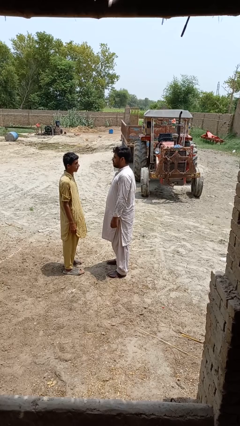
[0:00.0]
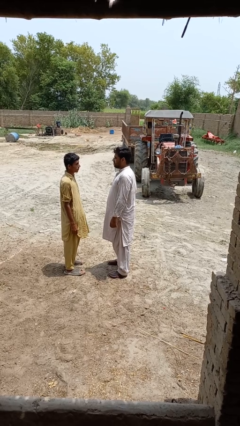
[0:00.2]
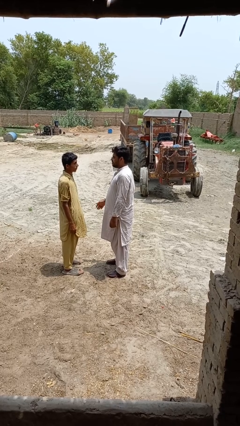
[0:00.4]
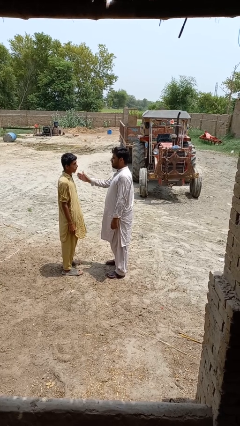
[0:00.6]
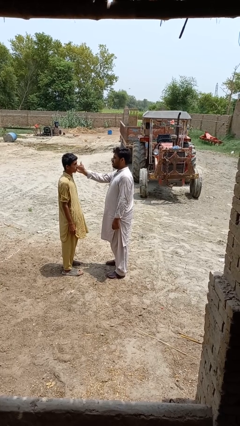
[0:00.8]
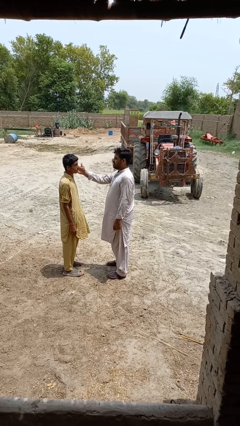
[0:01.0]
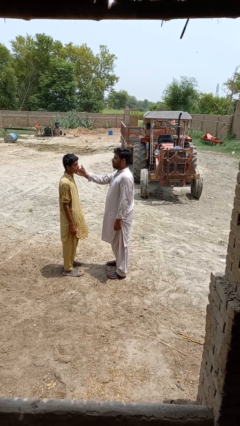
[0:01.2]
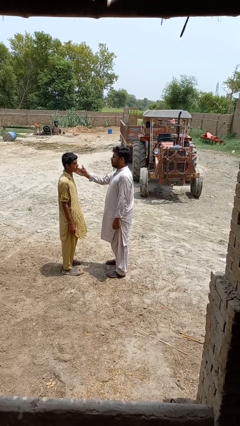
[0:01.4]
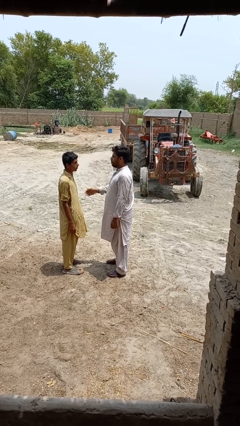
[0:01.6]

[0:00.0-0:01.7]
person touches face of person

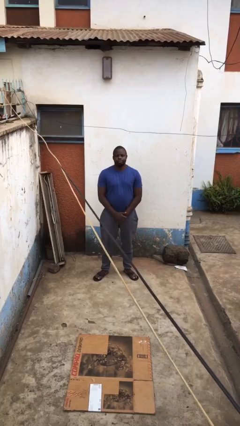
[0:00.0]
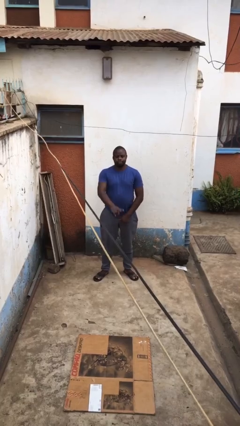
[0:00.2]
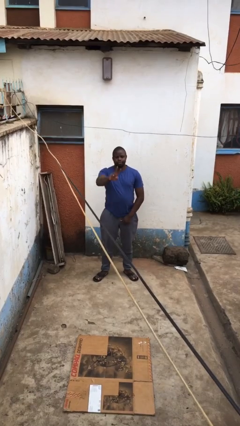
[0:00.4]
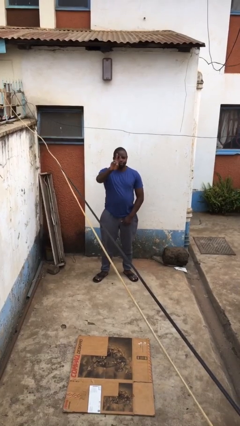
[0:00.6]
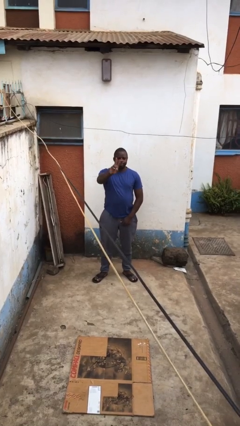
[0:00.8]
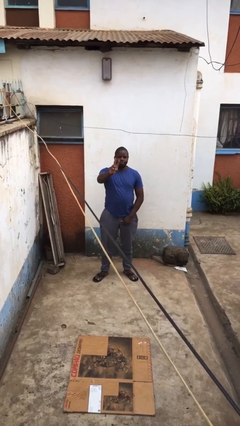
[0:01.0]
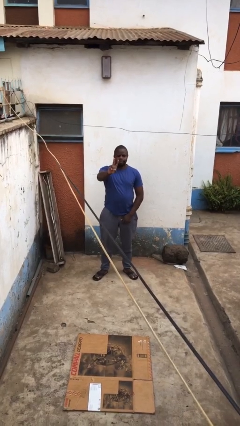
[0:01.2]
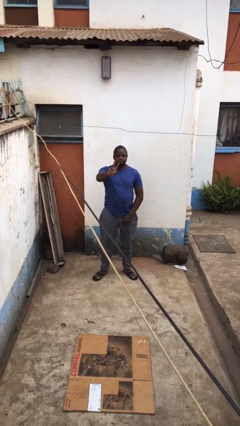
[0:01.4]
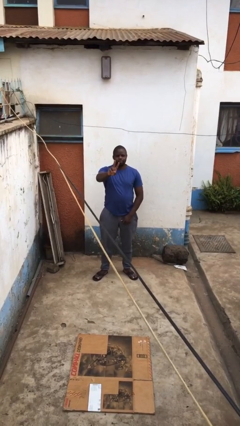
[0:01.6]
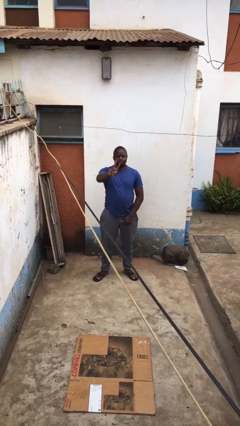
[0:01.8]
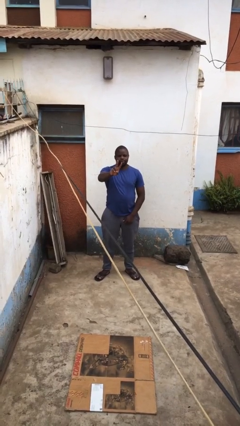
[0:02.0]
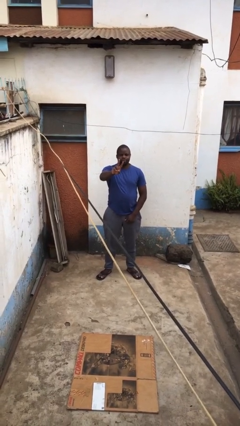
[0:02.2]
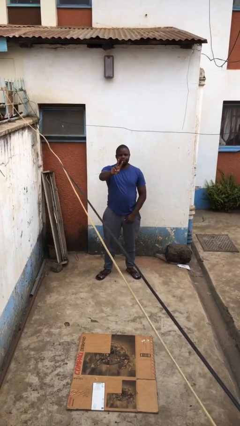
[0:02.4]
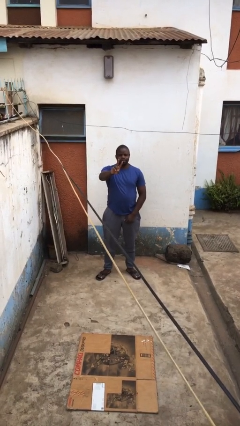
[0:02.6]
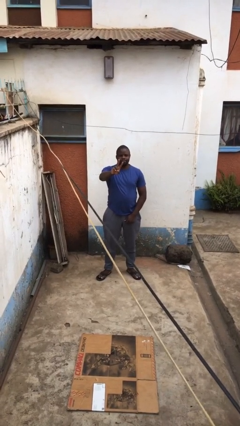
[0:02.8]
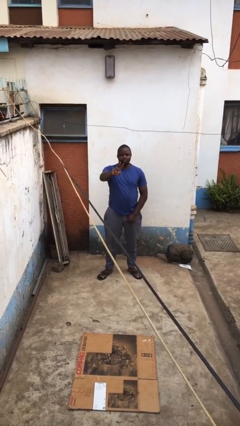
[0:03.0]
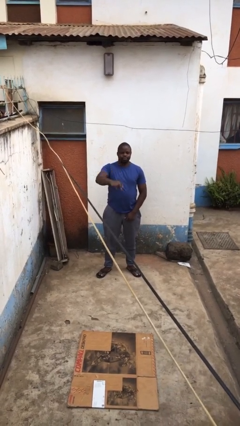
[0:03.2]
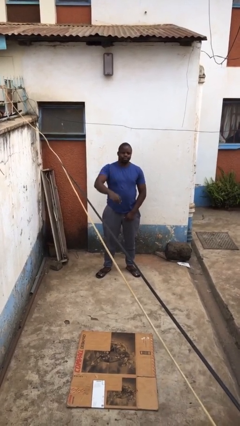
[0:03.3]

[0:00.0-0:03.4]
person gestures peace

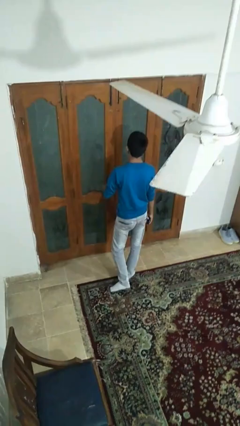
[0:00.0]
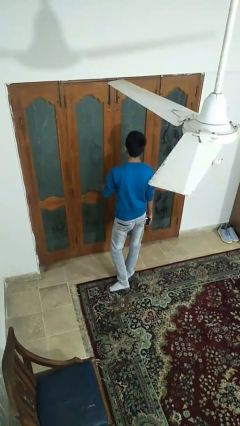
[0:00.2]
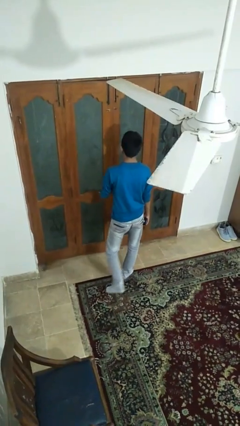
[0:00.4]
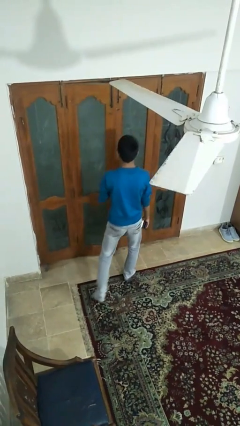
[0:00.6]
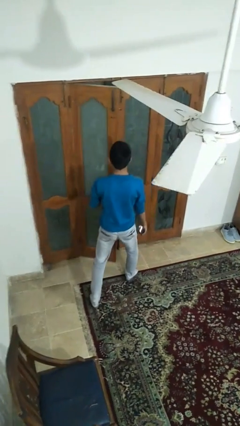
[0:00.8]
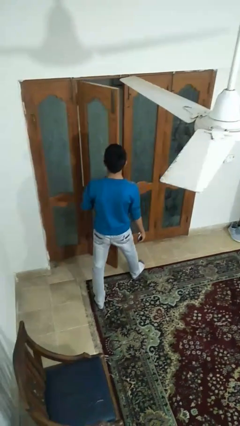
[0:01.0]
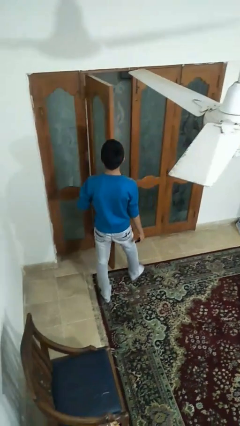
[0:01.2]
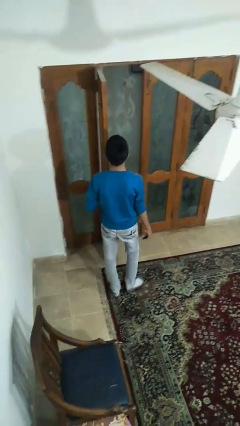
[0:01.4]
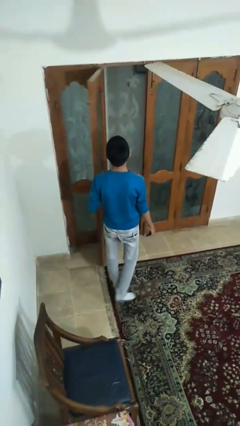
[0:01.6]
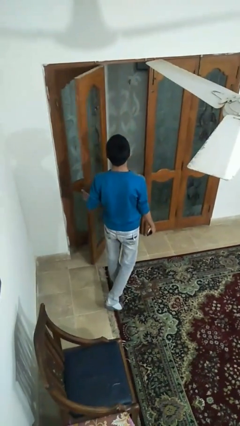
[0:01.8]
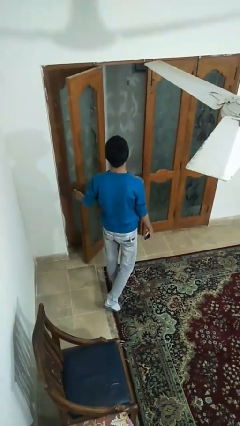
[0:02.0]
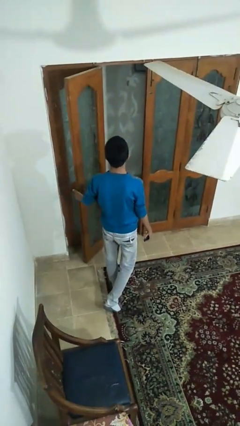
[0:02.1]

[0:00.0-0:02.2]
person opens facility door

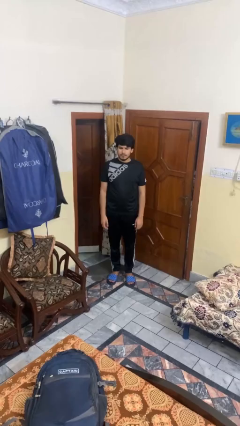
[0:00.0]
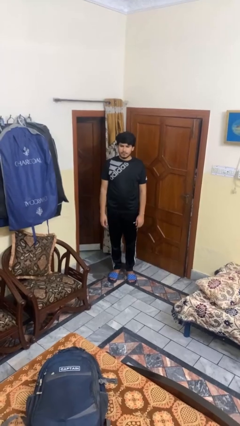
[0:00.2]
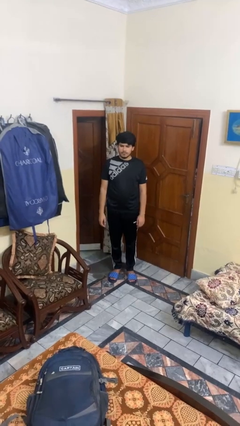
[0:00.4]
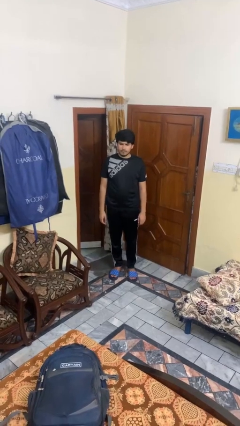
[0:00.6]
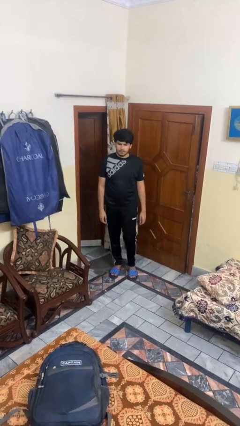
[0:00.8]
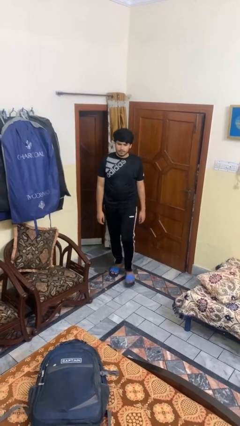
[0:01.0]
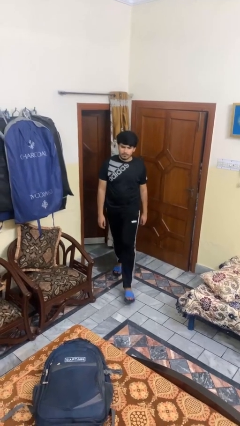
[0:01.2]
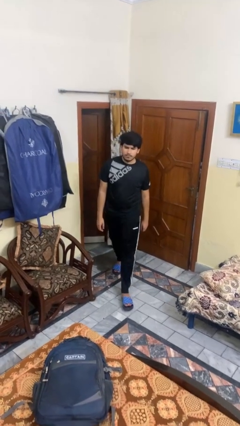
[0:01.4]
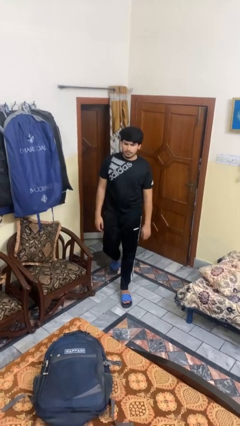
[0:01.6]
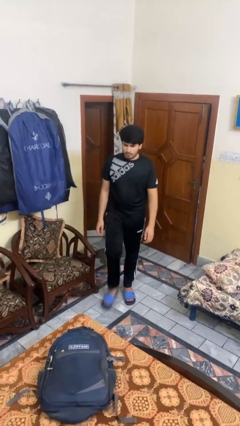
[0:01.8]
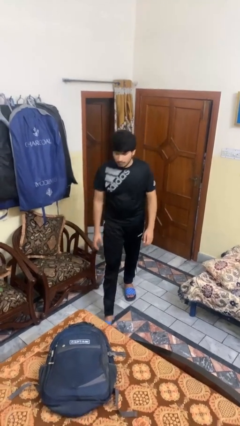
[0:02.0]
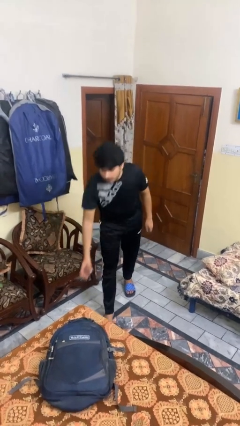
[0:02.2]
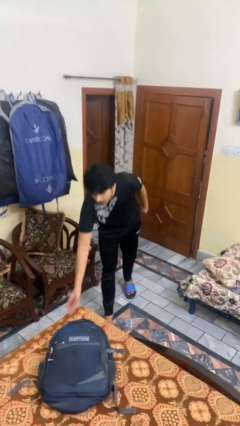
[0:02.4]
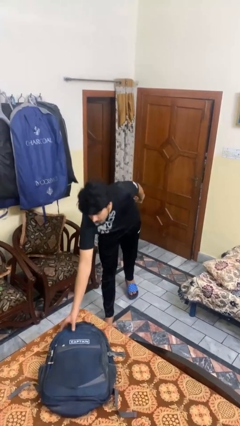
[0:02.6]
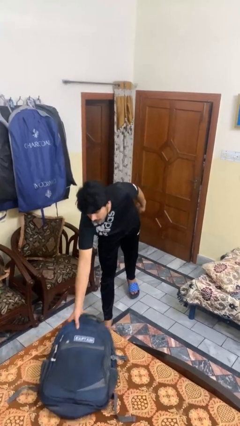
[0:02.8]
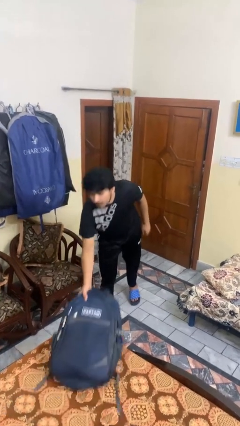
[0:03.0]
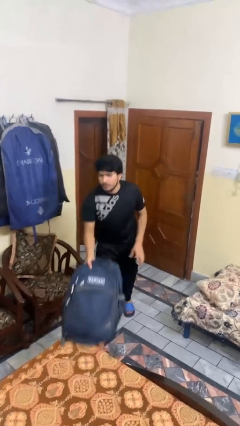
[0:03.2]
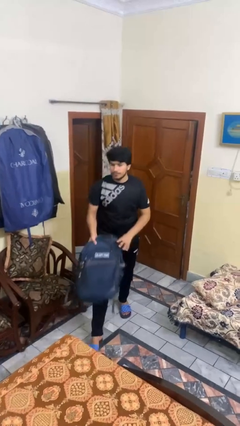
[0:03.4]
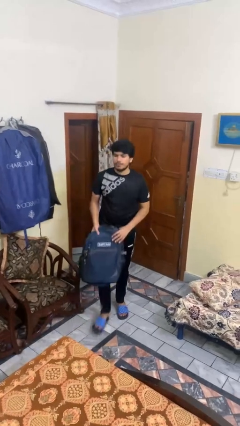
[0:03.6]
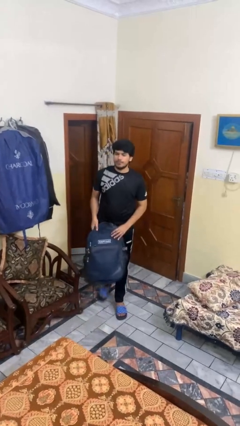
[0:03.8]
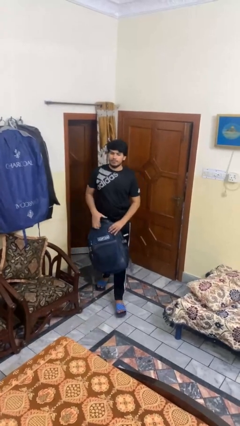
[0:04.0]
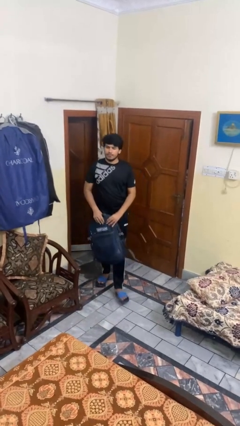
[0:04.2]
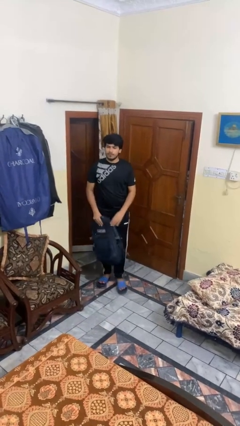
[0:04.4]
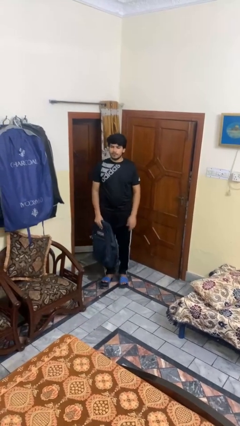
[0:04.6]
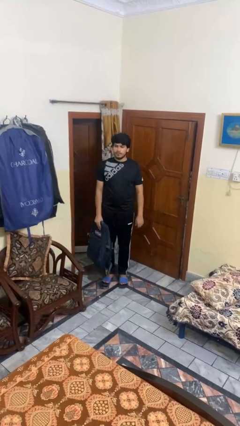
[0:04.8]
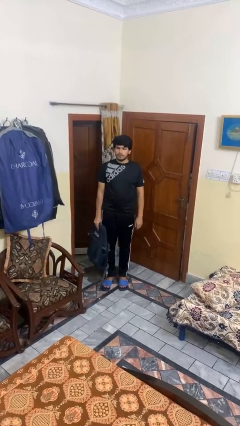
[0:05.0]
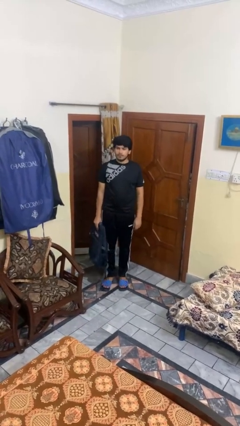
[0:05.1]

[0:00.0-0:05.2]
person picks up object from bed

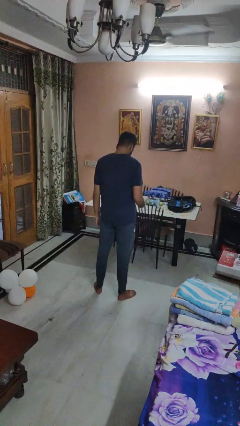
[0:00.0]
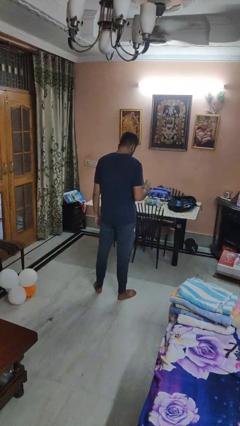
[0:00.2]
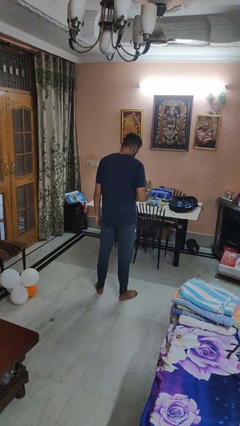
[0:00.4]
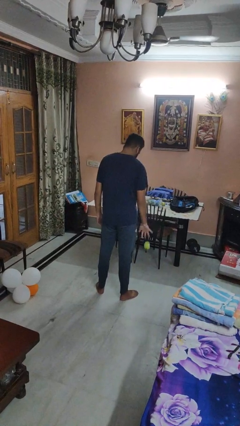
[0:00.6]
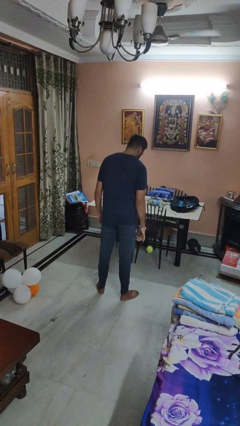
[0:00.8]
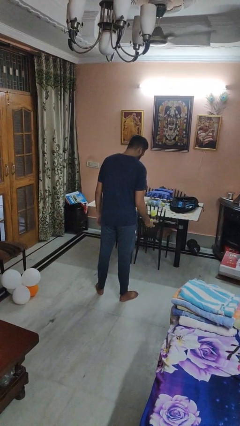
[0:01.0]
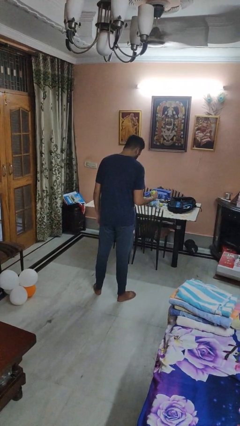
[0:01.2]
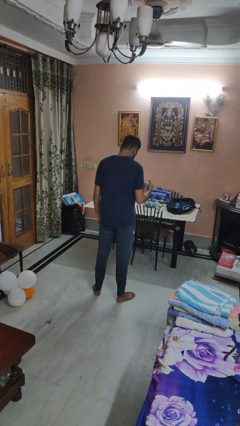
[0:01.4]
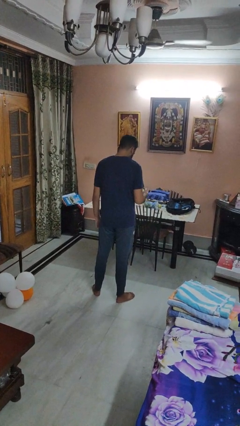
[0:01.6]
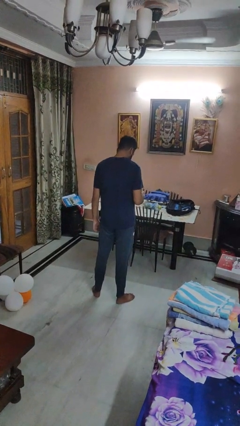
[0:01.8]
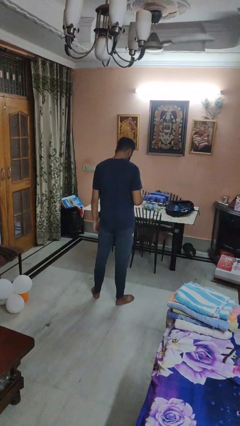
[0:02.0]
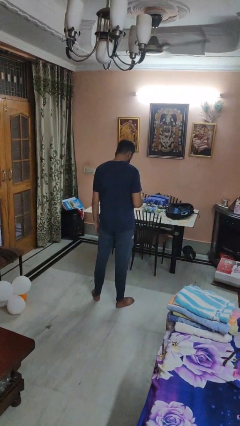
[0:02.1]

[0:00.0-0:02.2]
person bounces ball on floor

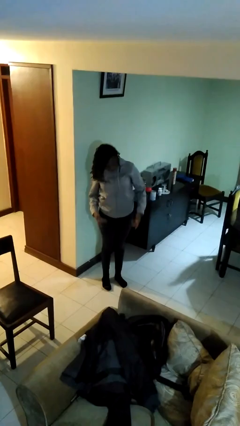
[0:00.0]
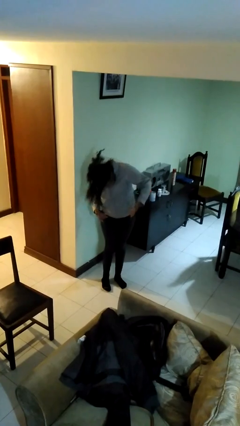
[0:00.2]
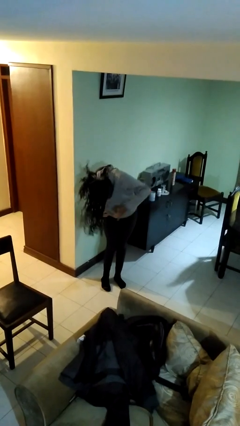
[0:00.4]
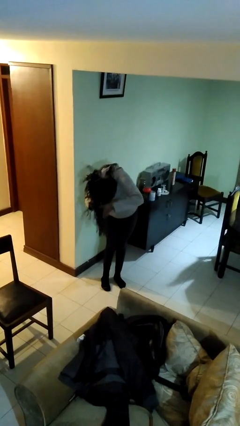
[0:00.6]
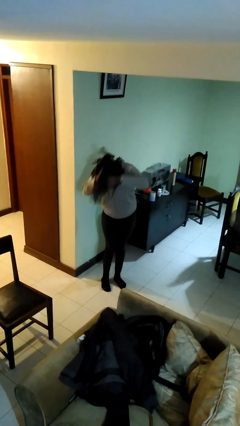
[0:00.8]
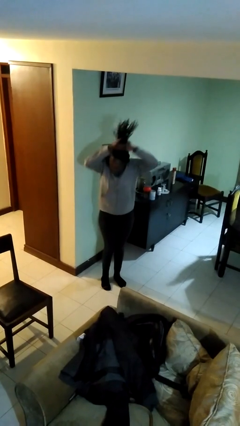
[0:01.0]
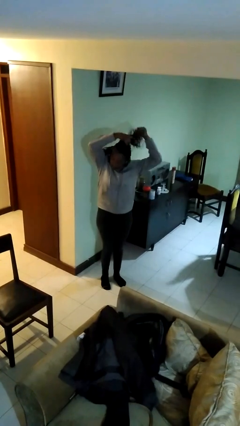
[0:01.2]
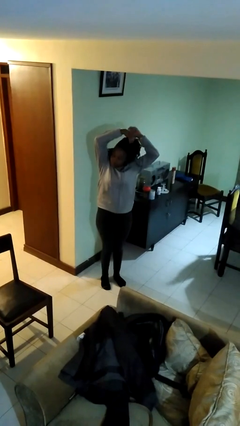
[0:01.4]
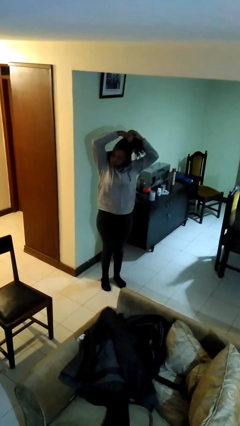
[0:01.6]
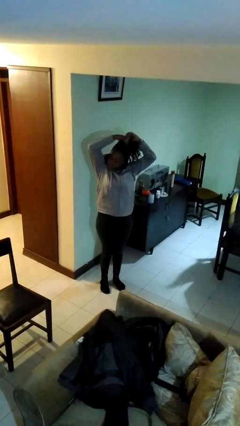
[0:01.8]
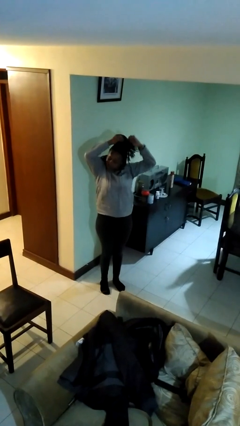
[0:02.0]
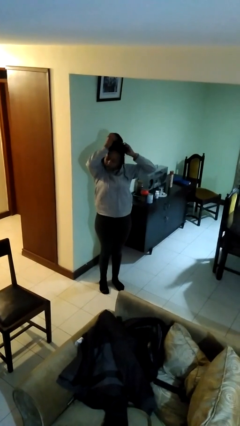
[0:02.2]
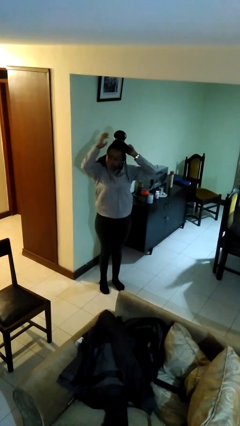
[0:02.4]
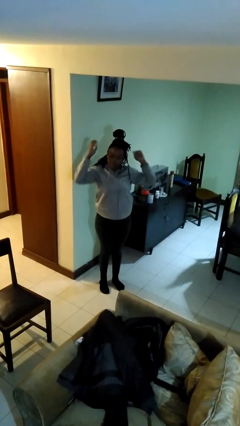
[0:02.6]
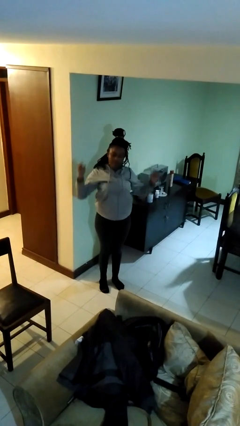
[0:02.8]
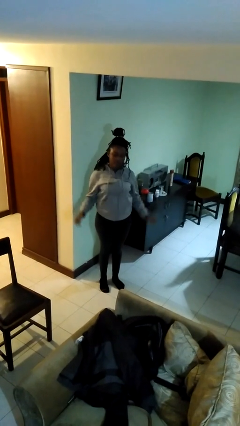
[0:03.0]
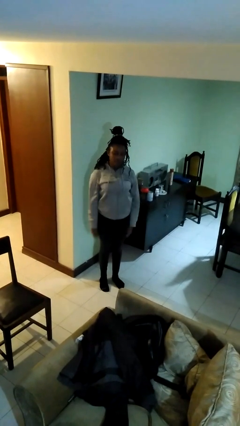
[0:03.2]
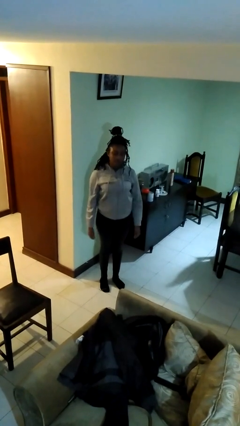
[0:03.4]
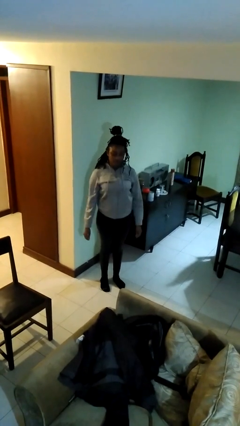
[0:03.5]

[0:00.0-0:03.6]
person puts hair in ponytail
